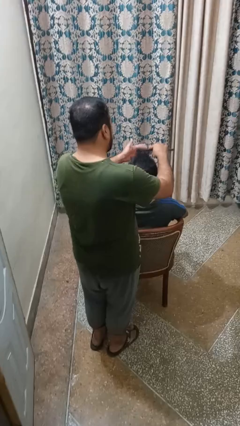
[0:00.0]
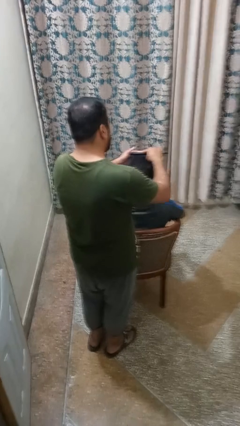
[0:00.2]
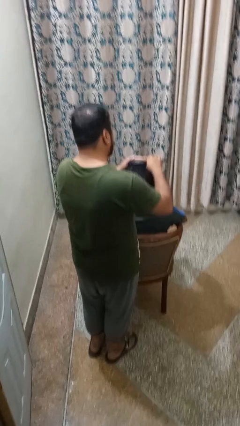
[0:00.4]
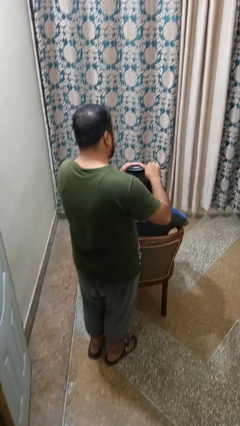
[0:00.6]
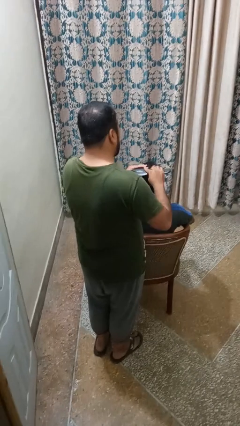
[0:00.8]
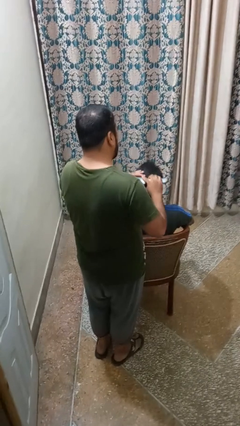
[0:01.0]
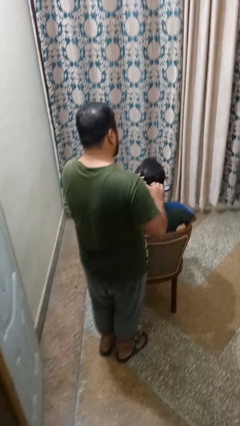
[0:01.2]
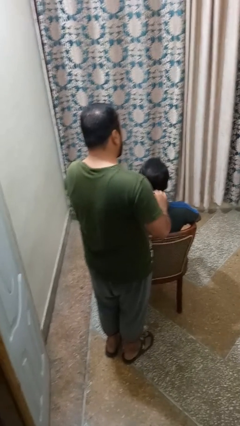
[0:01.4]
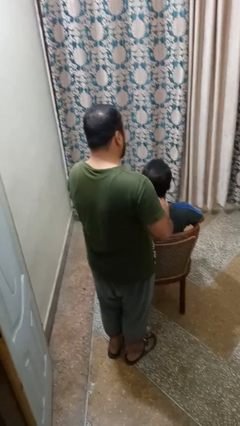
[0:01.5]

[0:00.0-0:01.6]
person brushes hair of person

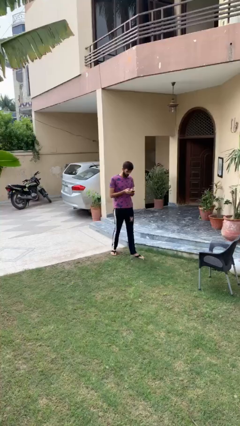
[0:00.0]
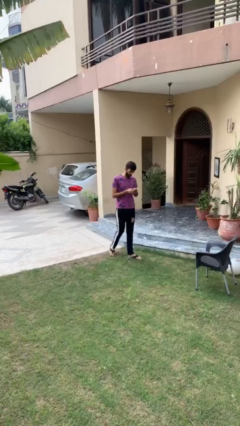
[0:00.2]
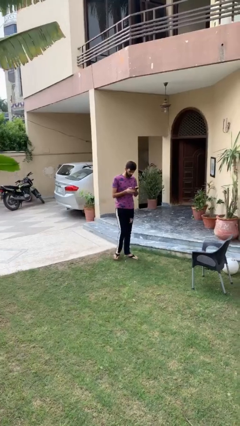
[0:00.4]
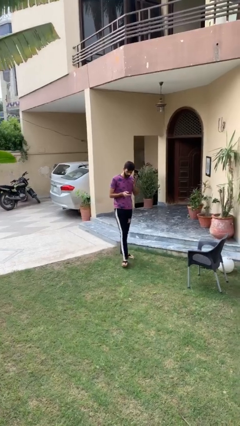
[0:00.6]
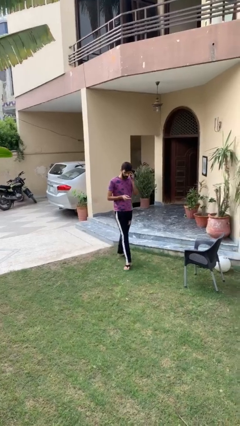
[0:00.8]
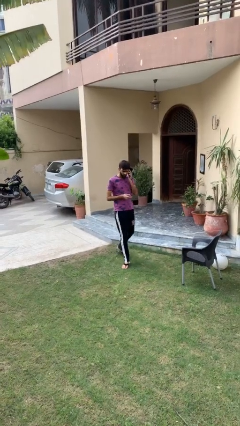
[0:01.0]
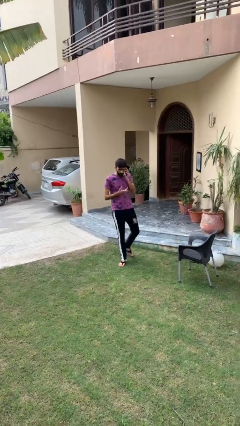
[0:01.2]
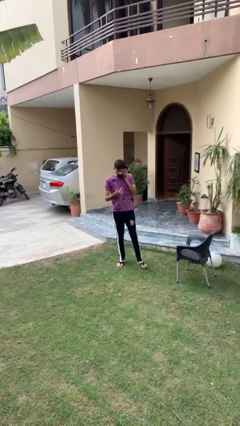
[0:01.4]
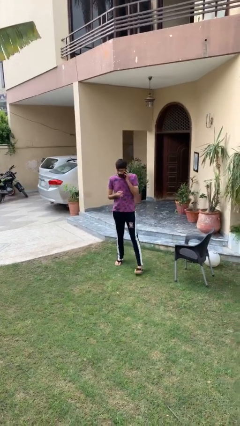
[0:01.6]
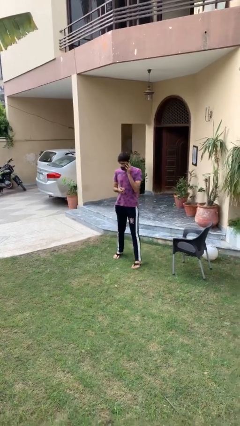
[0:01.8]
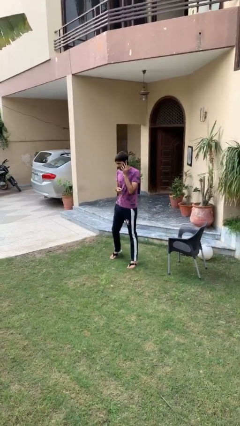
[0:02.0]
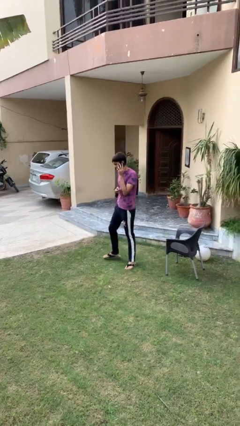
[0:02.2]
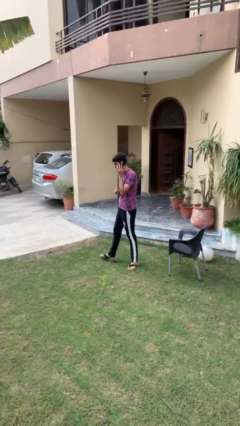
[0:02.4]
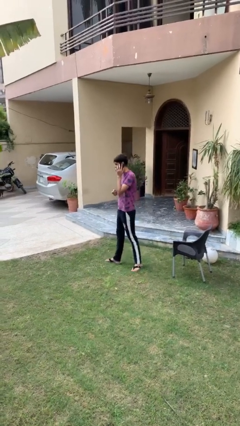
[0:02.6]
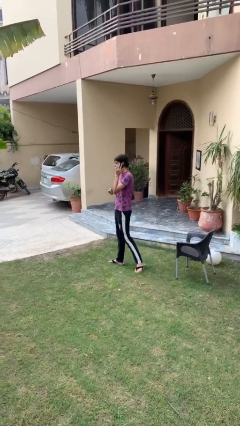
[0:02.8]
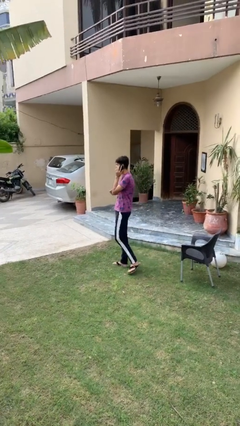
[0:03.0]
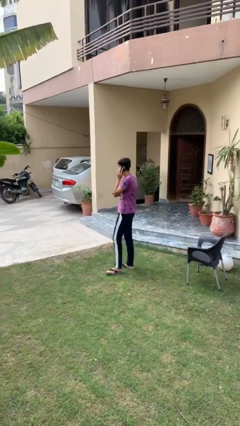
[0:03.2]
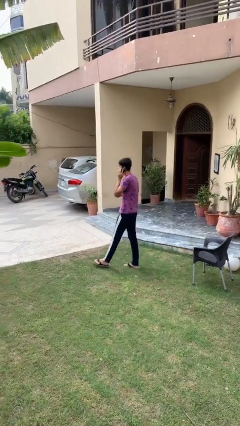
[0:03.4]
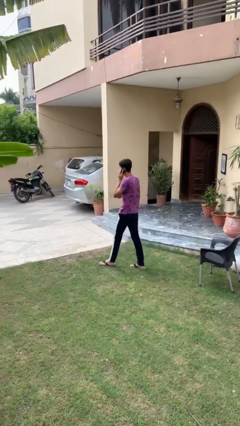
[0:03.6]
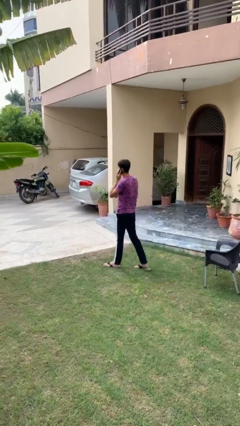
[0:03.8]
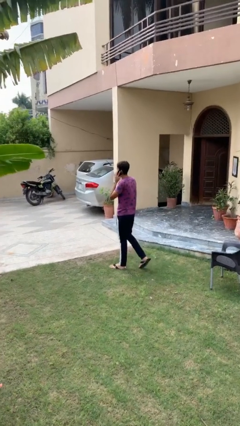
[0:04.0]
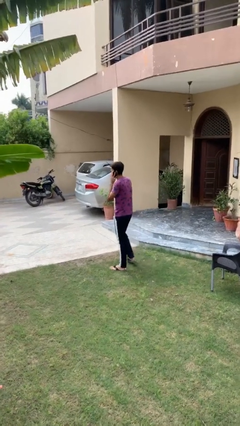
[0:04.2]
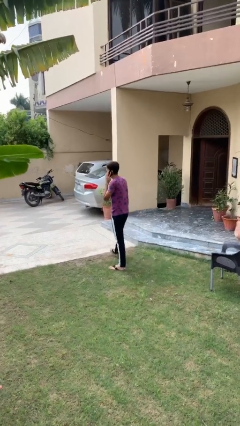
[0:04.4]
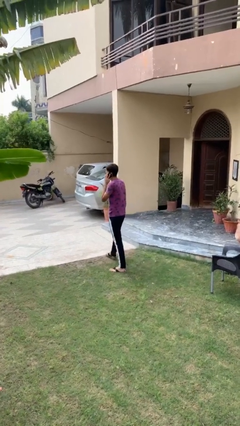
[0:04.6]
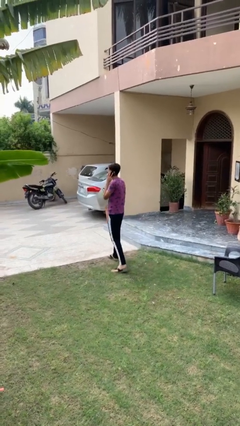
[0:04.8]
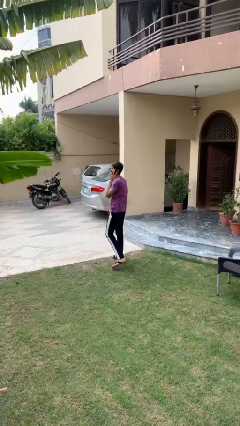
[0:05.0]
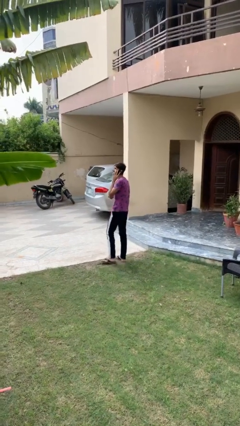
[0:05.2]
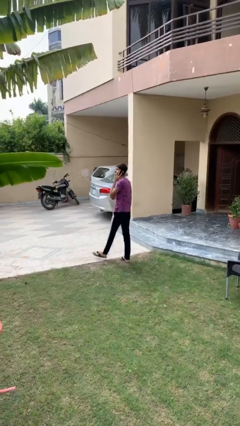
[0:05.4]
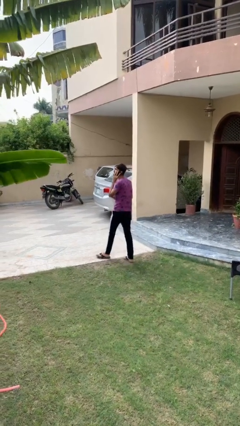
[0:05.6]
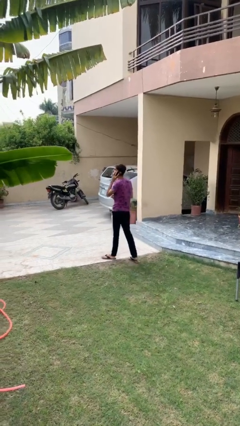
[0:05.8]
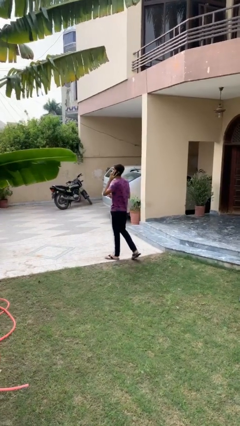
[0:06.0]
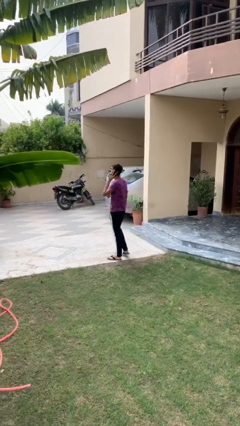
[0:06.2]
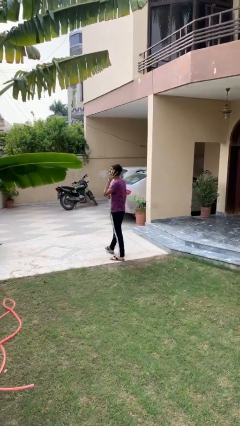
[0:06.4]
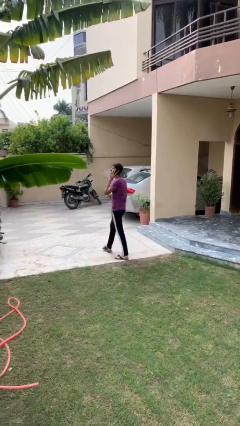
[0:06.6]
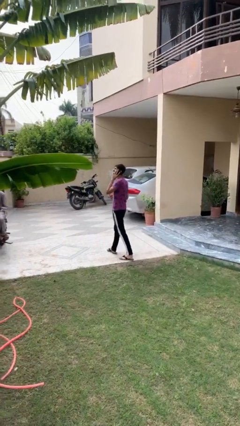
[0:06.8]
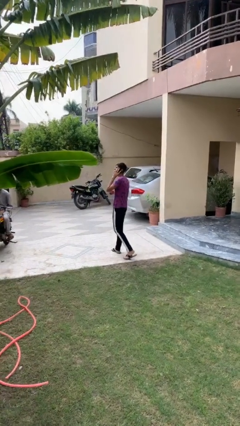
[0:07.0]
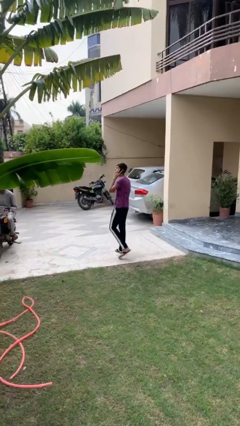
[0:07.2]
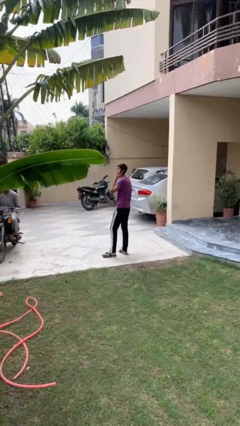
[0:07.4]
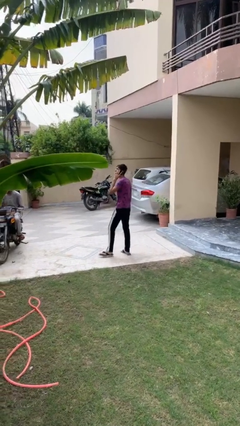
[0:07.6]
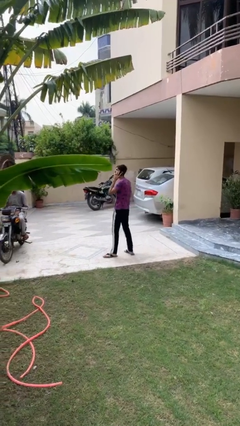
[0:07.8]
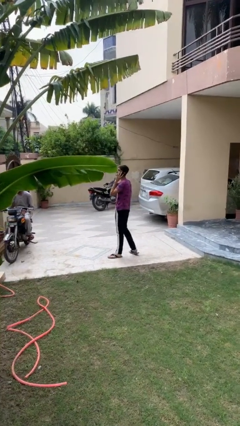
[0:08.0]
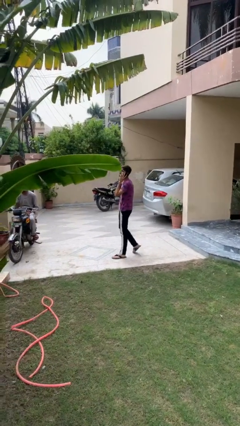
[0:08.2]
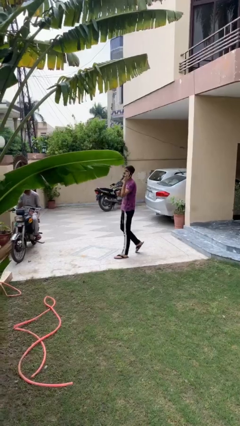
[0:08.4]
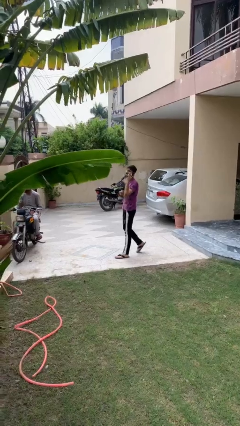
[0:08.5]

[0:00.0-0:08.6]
person talks on phone

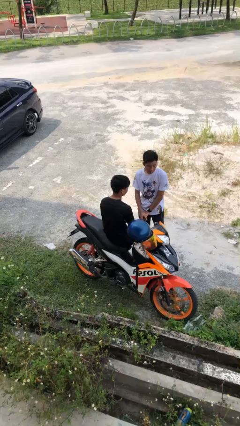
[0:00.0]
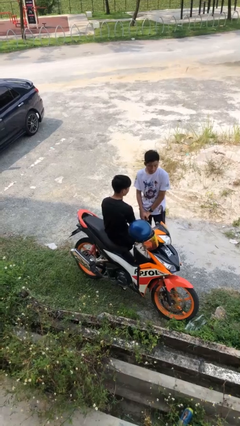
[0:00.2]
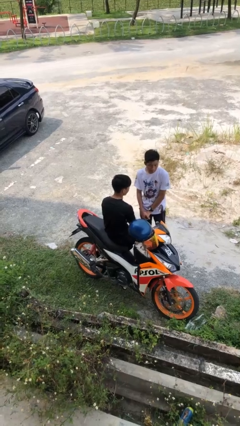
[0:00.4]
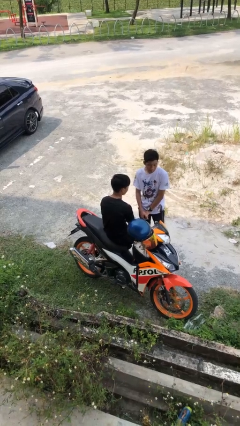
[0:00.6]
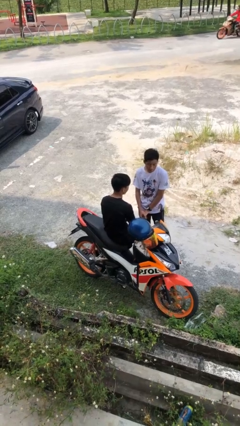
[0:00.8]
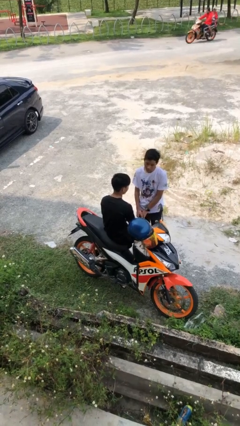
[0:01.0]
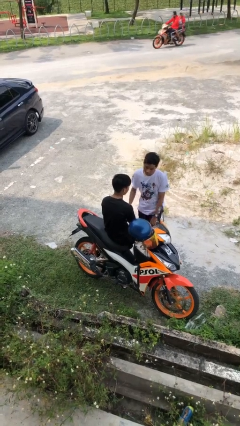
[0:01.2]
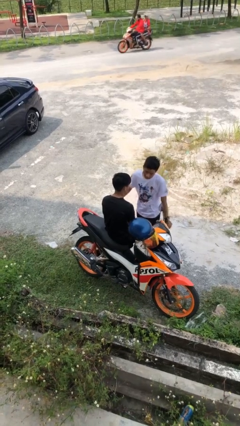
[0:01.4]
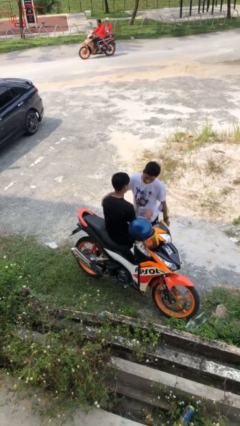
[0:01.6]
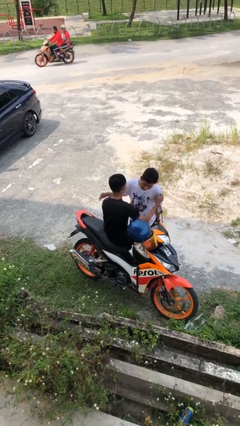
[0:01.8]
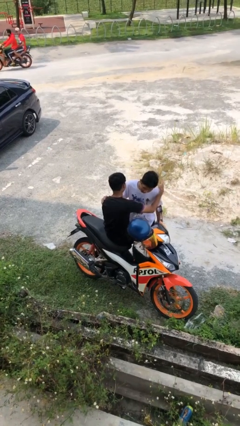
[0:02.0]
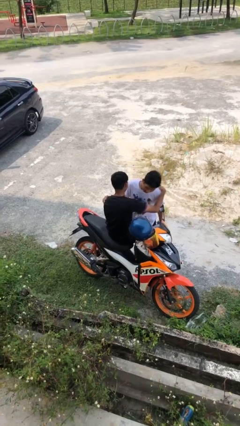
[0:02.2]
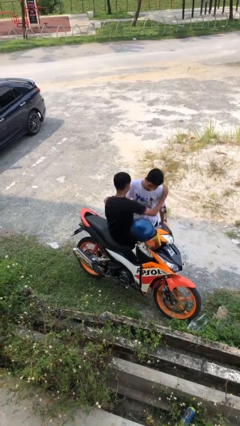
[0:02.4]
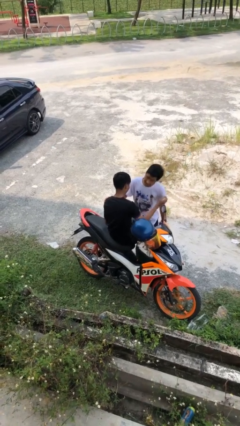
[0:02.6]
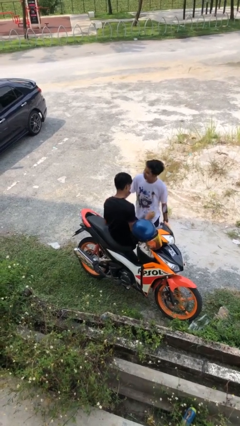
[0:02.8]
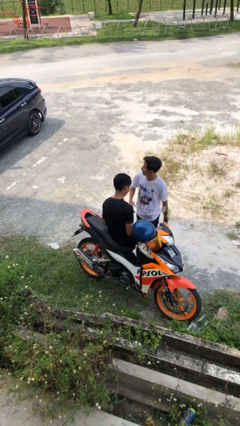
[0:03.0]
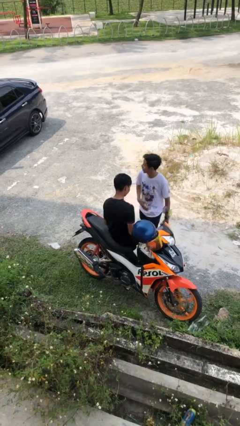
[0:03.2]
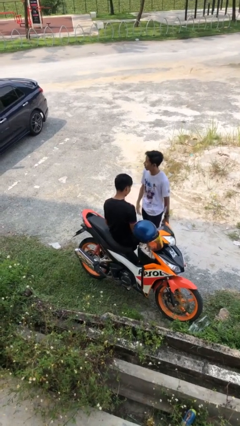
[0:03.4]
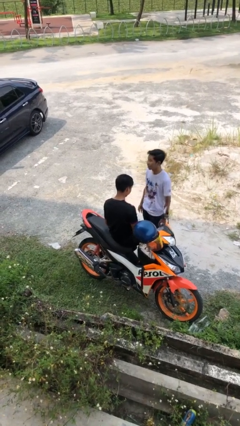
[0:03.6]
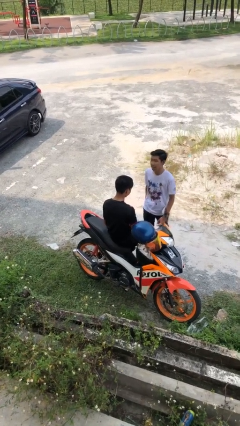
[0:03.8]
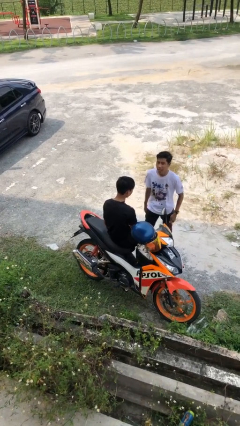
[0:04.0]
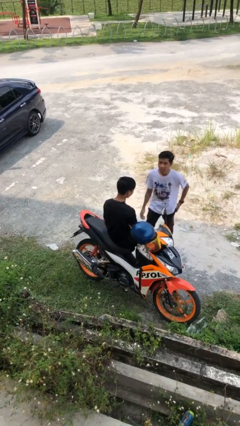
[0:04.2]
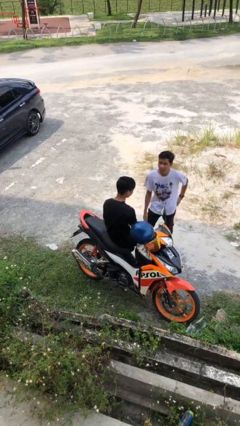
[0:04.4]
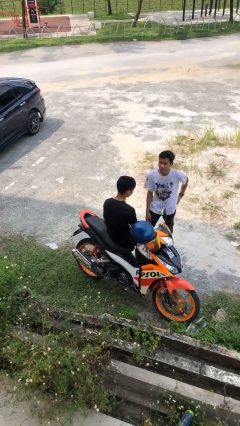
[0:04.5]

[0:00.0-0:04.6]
person embraces person

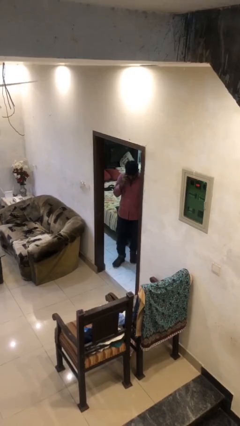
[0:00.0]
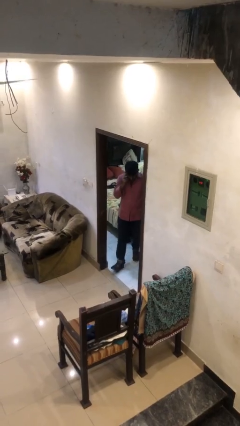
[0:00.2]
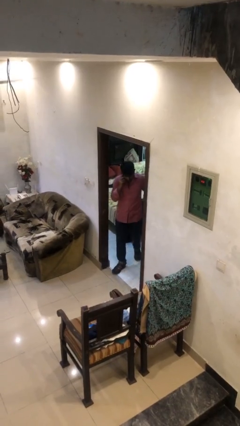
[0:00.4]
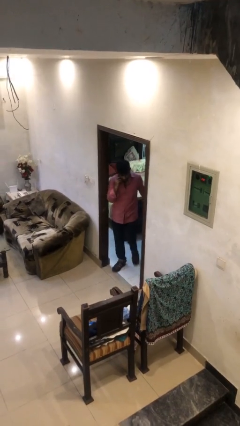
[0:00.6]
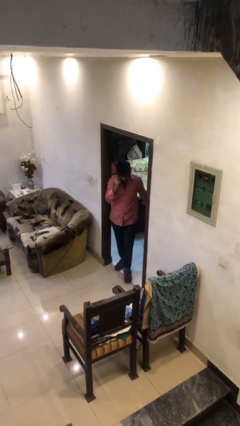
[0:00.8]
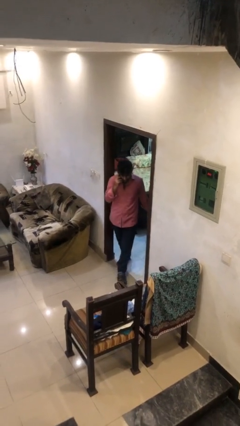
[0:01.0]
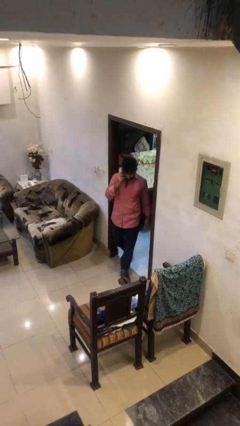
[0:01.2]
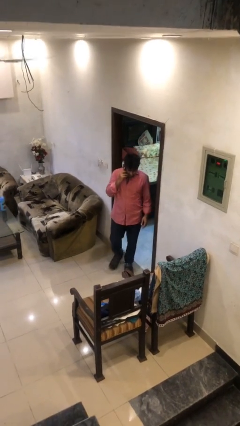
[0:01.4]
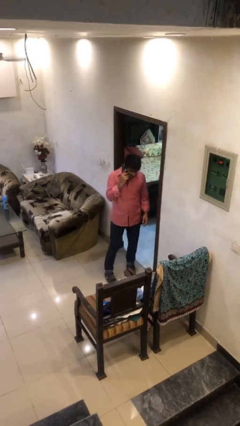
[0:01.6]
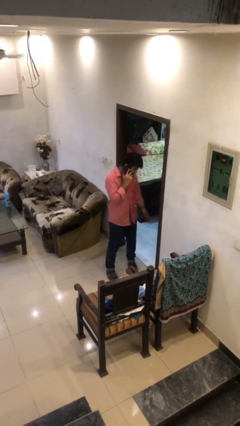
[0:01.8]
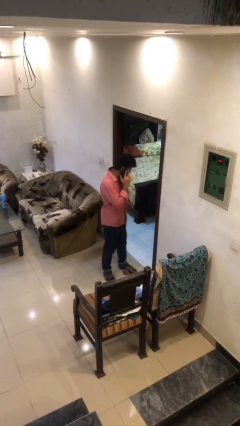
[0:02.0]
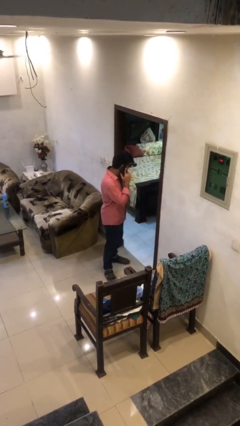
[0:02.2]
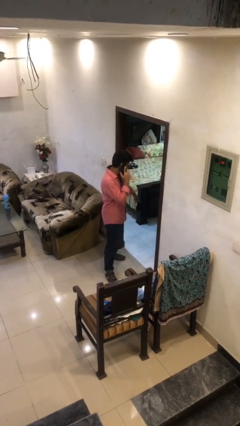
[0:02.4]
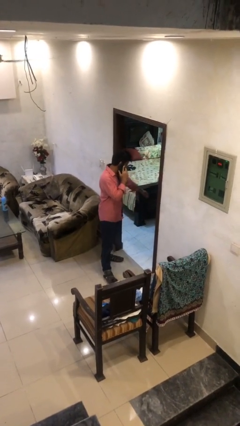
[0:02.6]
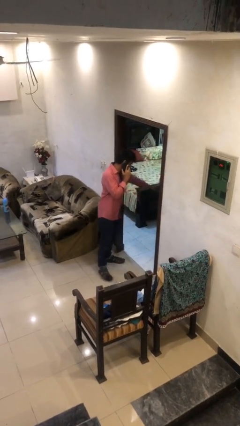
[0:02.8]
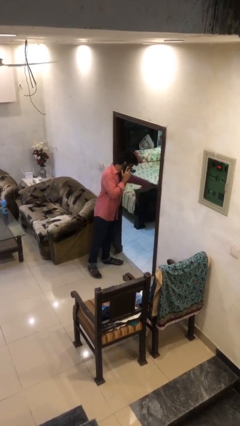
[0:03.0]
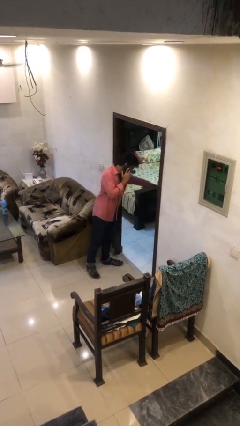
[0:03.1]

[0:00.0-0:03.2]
person enters scene through structure
